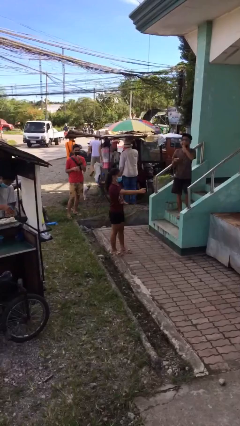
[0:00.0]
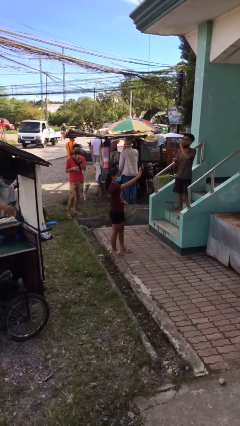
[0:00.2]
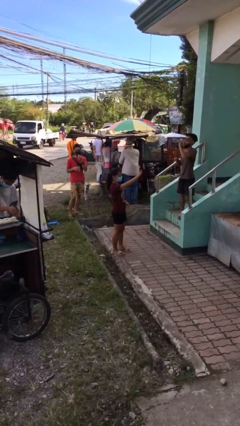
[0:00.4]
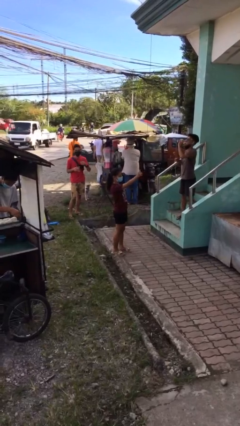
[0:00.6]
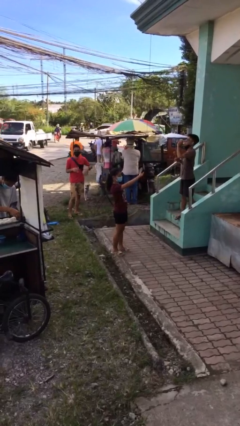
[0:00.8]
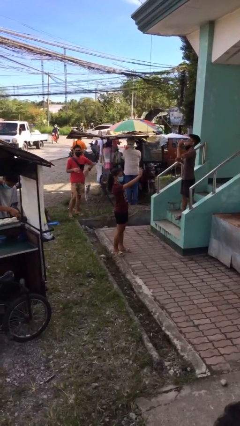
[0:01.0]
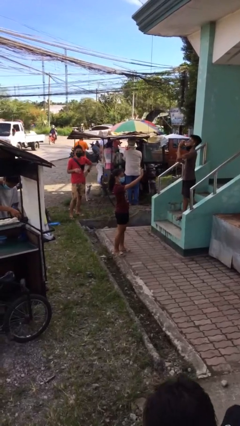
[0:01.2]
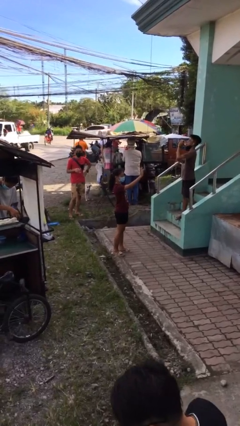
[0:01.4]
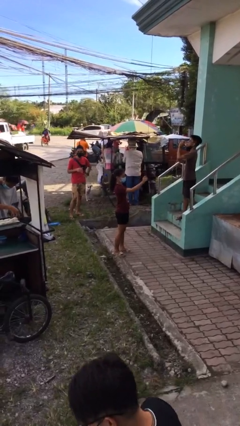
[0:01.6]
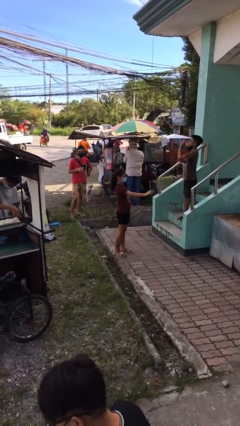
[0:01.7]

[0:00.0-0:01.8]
person waves at person

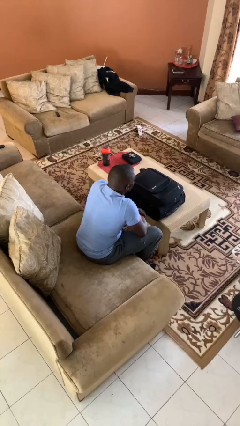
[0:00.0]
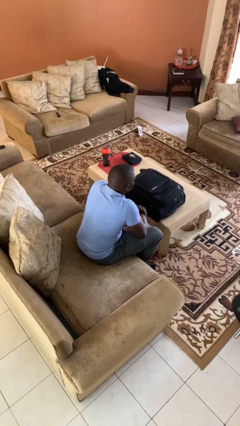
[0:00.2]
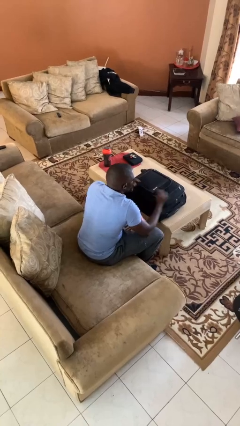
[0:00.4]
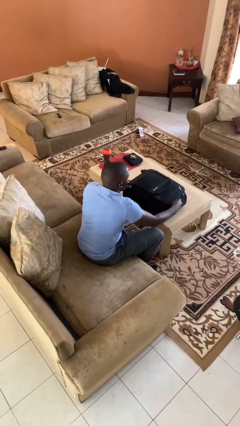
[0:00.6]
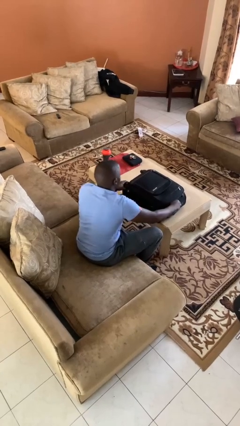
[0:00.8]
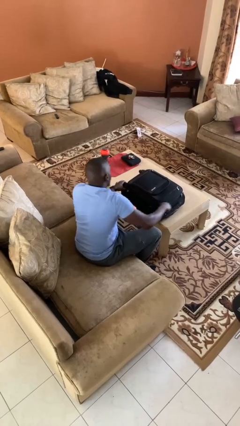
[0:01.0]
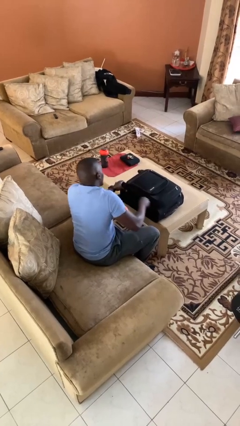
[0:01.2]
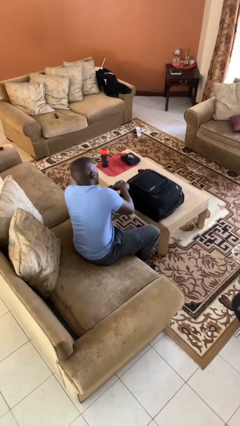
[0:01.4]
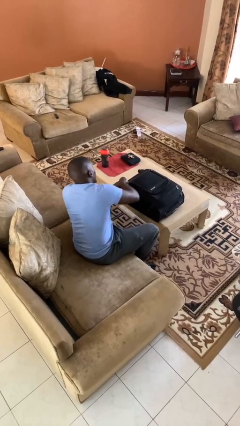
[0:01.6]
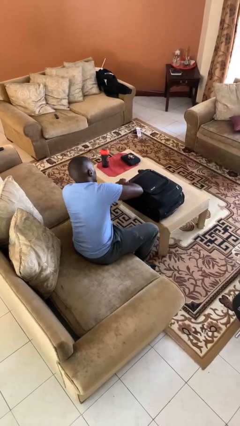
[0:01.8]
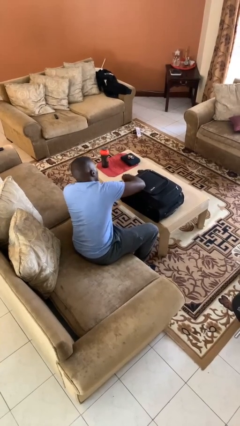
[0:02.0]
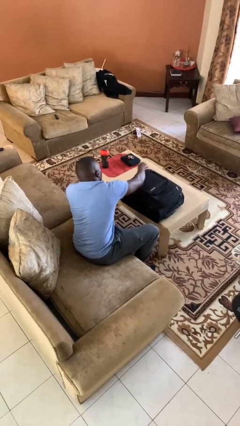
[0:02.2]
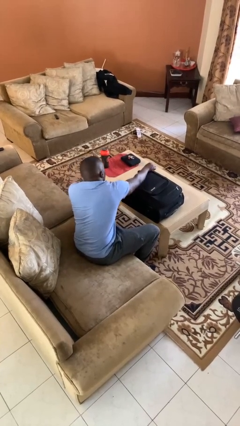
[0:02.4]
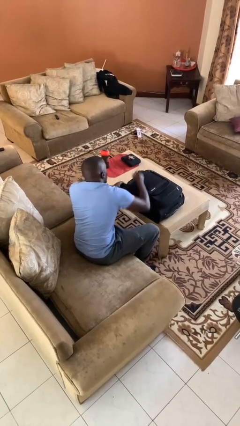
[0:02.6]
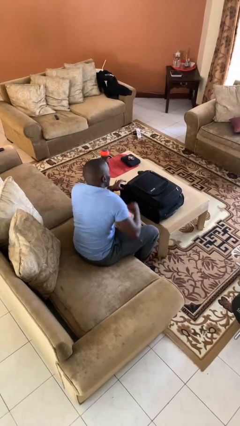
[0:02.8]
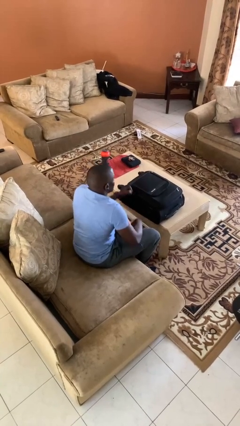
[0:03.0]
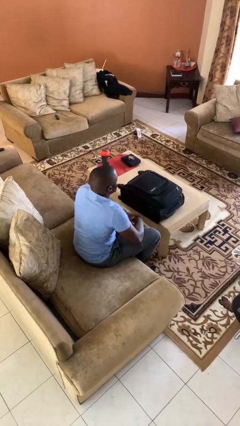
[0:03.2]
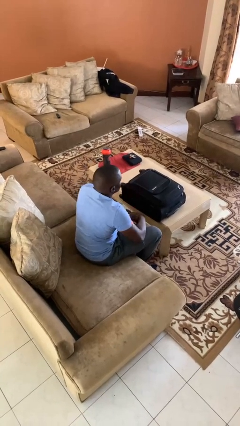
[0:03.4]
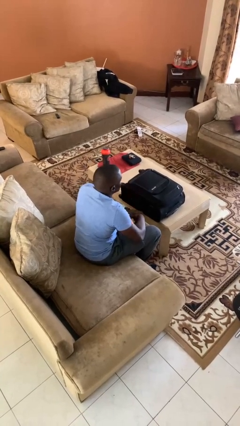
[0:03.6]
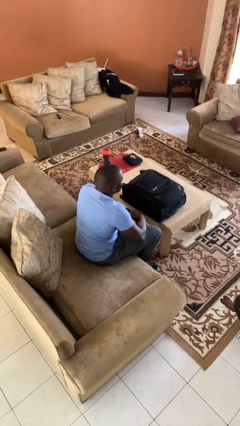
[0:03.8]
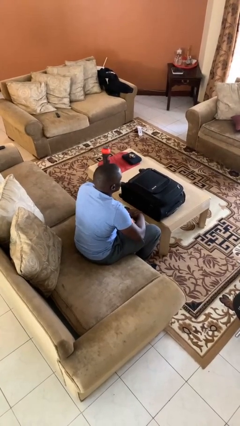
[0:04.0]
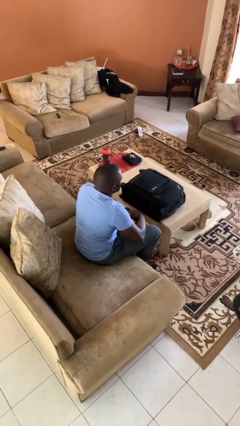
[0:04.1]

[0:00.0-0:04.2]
person opens suitcase

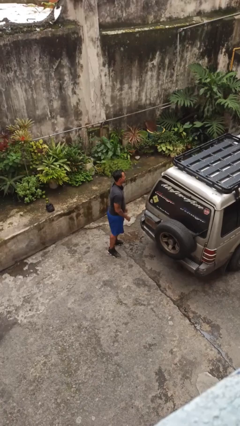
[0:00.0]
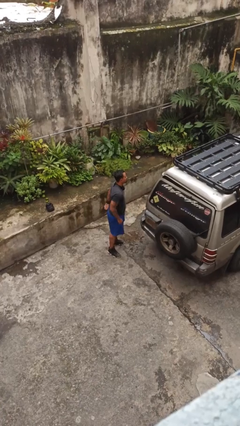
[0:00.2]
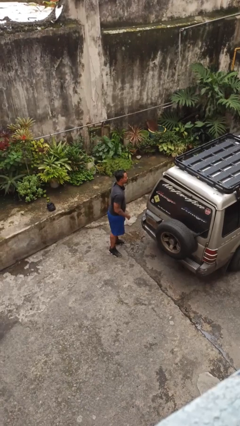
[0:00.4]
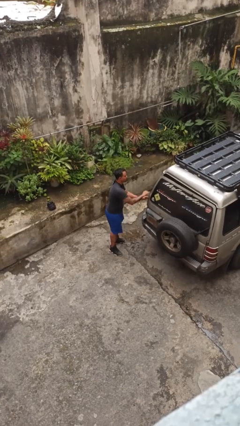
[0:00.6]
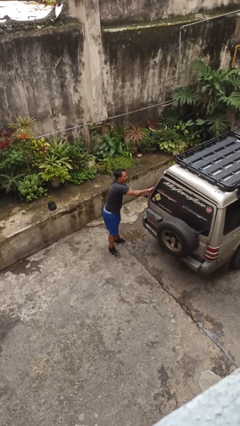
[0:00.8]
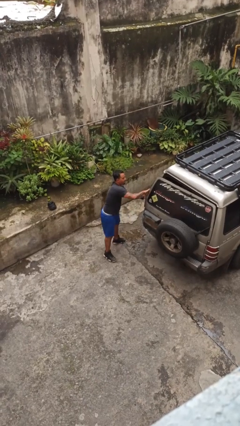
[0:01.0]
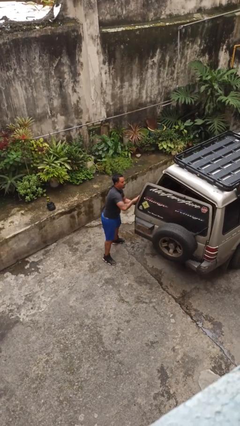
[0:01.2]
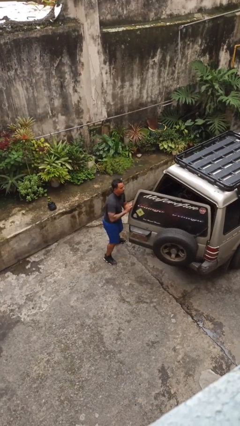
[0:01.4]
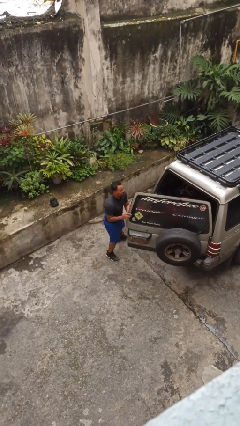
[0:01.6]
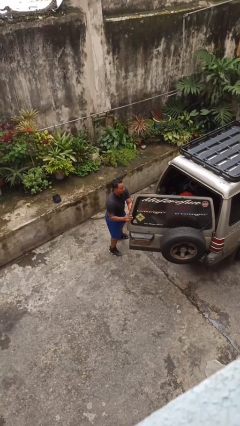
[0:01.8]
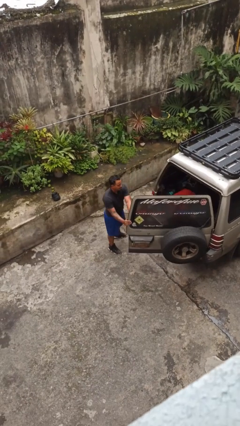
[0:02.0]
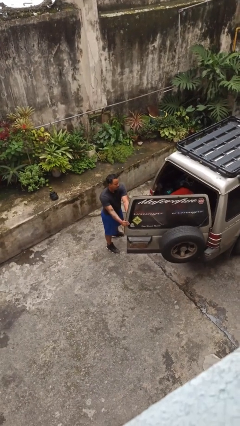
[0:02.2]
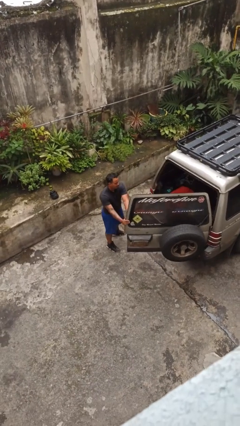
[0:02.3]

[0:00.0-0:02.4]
person opens car trunk

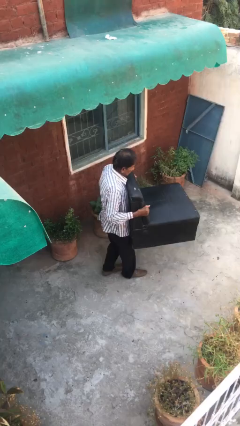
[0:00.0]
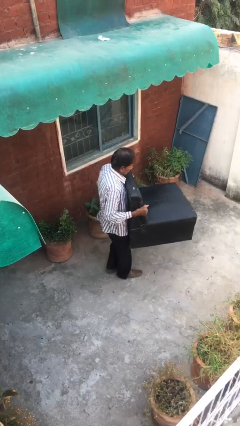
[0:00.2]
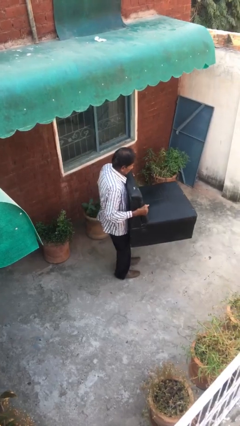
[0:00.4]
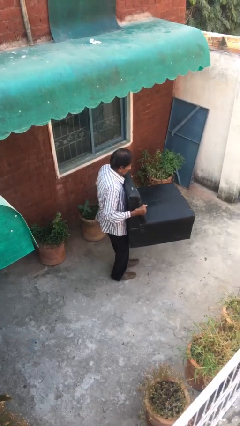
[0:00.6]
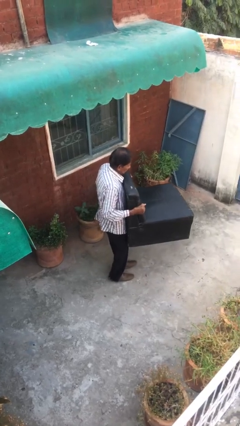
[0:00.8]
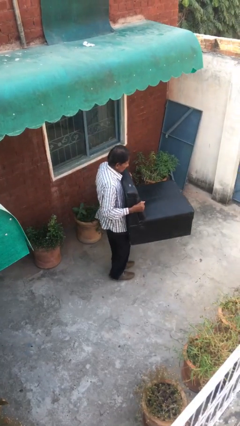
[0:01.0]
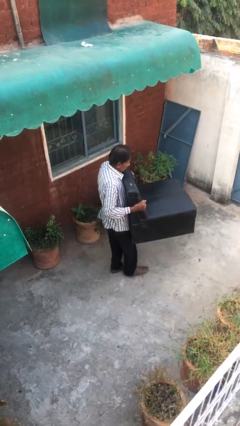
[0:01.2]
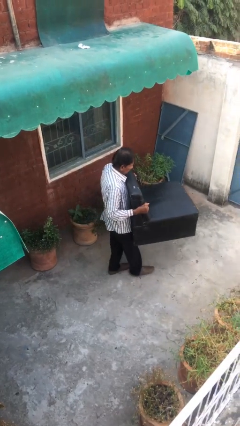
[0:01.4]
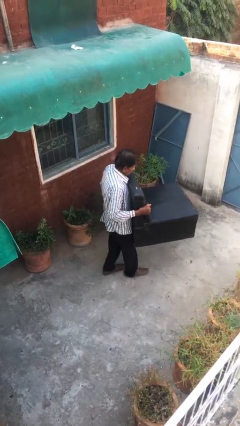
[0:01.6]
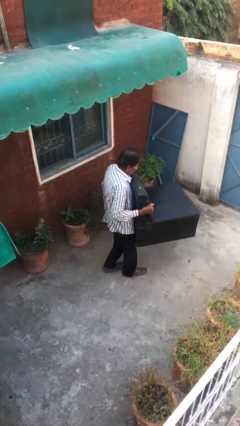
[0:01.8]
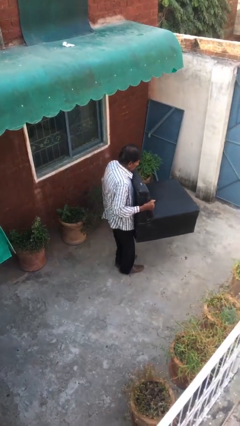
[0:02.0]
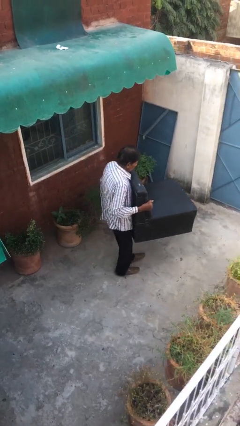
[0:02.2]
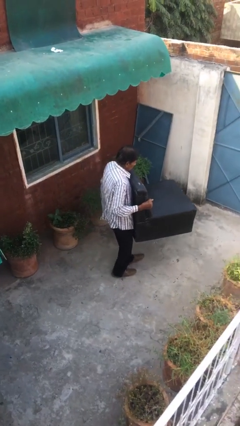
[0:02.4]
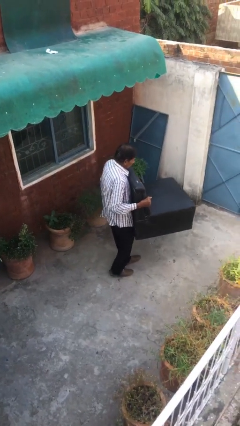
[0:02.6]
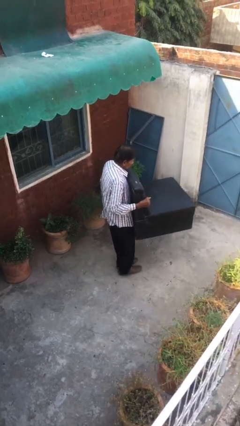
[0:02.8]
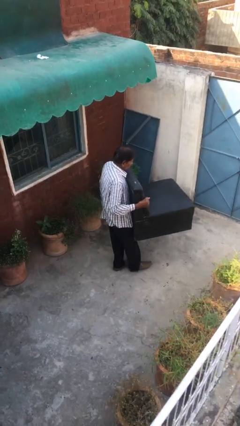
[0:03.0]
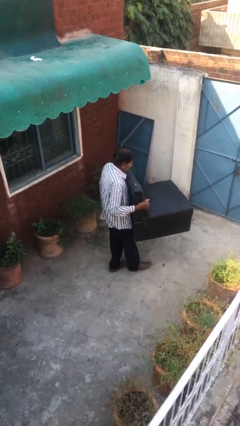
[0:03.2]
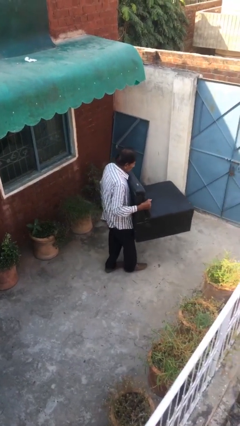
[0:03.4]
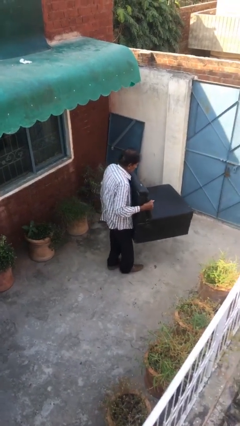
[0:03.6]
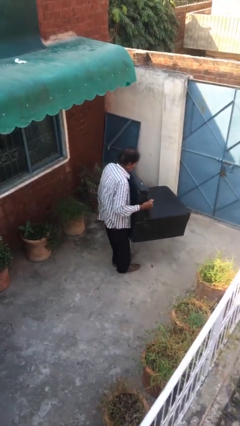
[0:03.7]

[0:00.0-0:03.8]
person carries heavy object

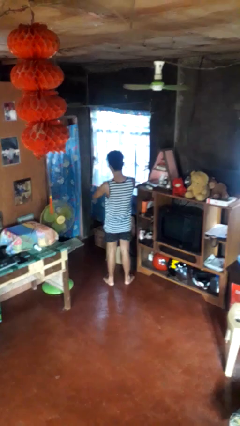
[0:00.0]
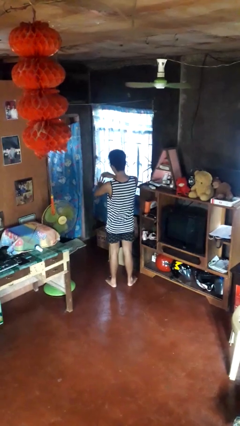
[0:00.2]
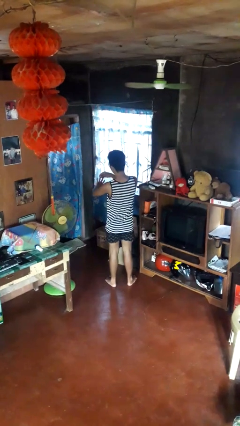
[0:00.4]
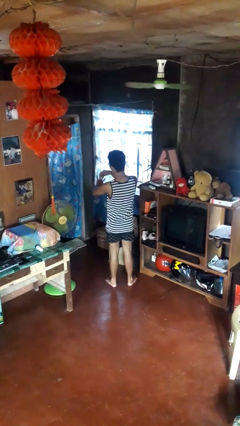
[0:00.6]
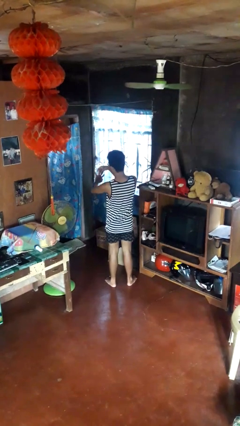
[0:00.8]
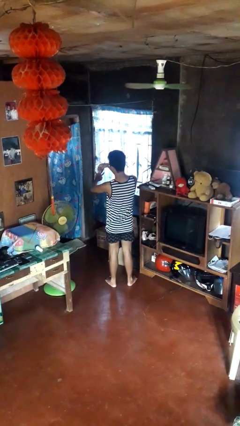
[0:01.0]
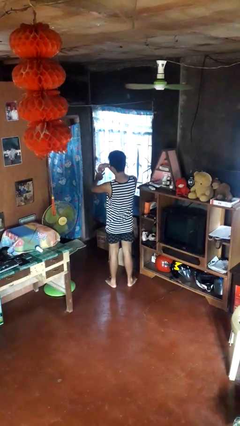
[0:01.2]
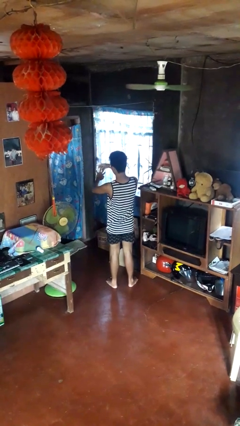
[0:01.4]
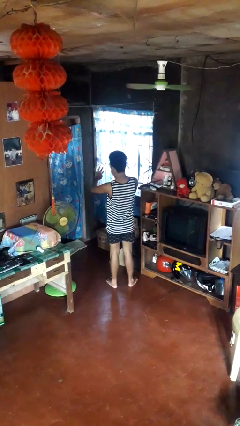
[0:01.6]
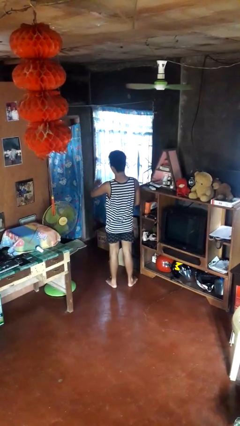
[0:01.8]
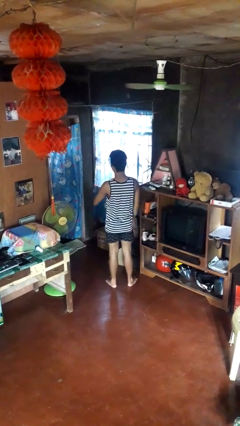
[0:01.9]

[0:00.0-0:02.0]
person puts on ring

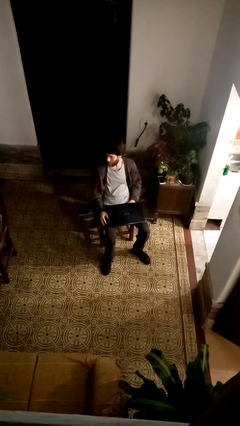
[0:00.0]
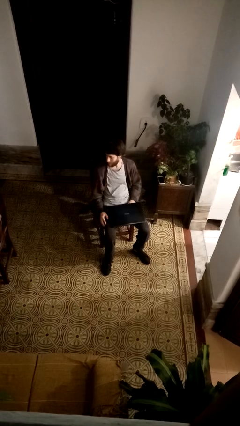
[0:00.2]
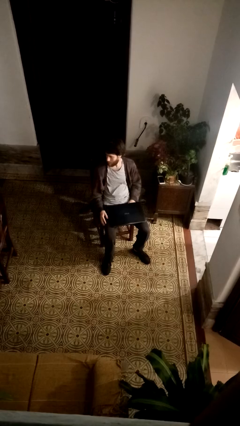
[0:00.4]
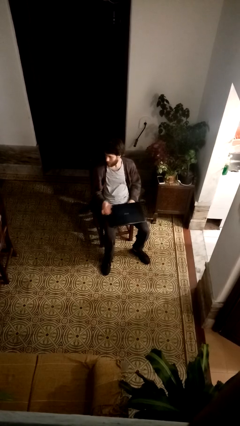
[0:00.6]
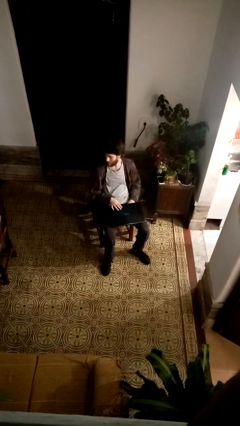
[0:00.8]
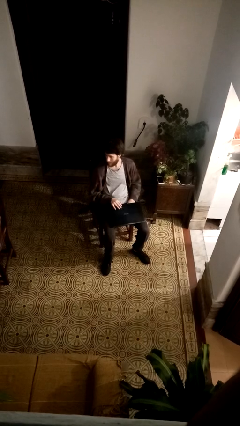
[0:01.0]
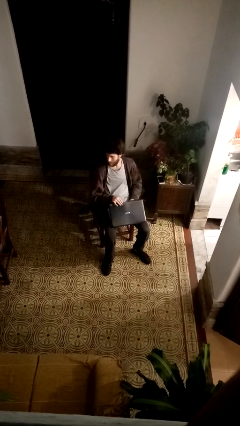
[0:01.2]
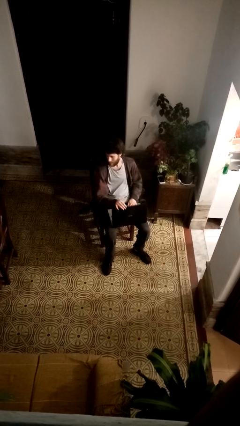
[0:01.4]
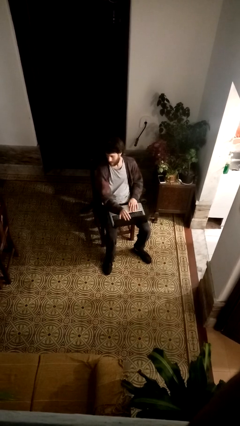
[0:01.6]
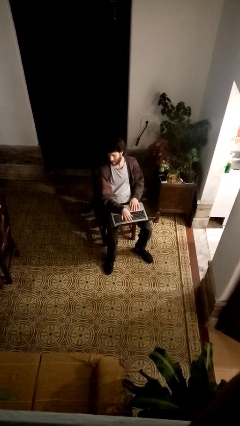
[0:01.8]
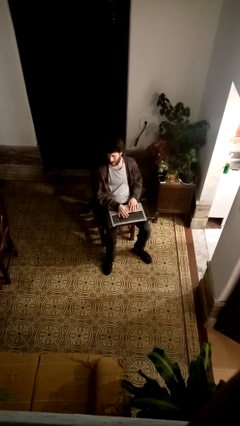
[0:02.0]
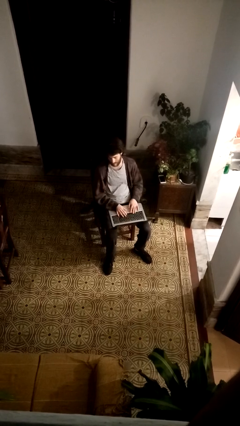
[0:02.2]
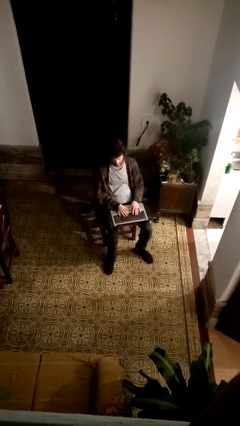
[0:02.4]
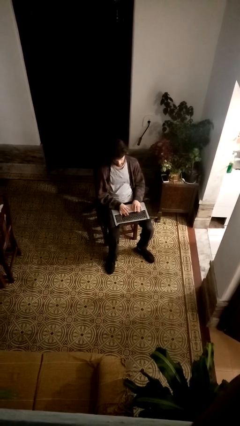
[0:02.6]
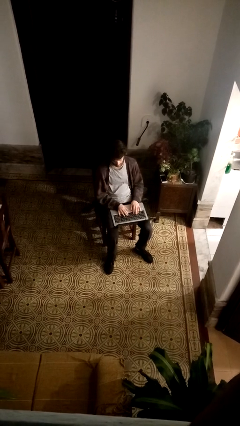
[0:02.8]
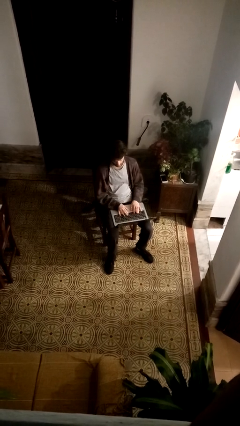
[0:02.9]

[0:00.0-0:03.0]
person opens laptop

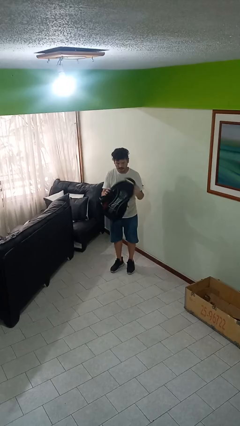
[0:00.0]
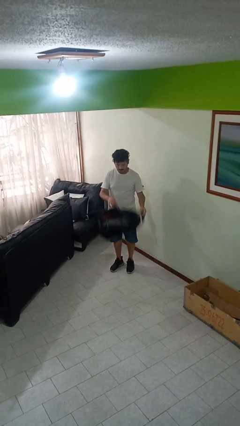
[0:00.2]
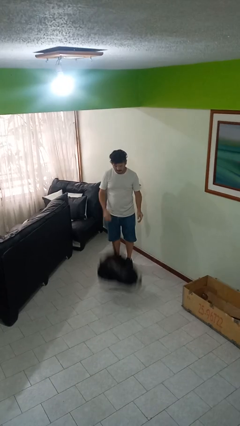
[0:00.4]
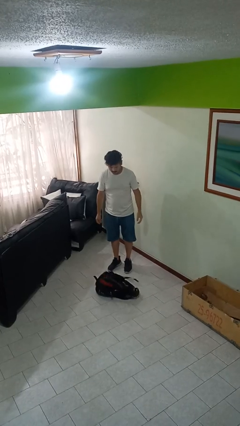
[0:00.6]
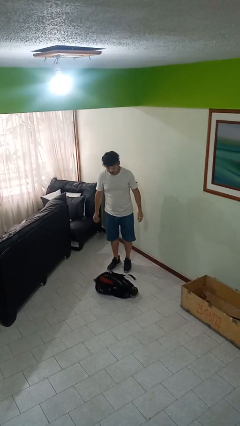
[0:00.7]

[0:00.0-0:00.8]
person drops object
